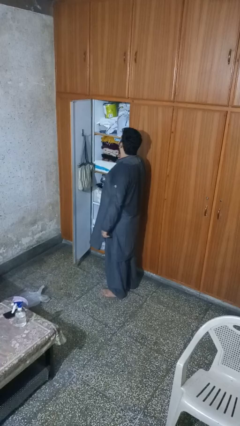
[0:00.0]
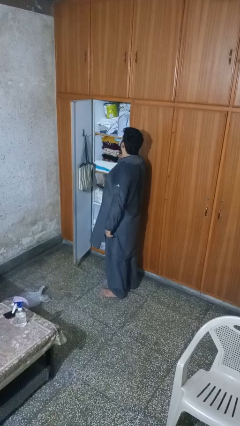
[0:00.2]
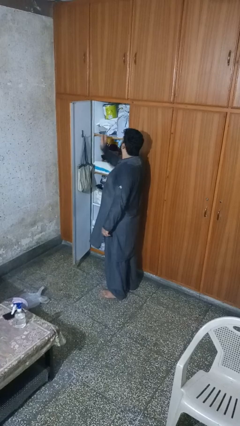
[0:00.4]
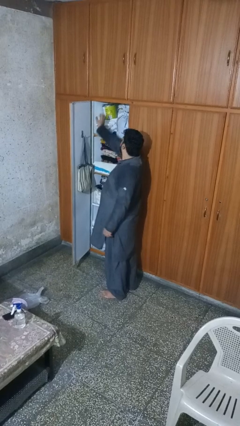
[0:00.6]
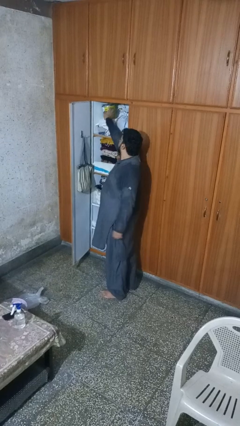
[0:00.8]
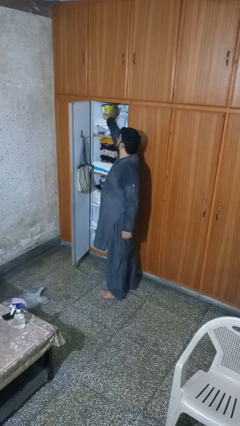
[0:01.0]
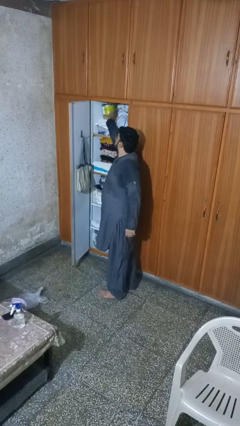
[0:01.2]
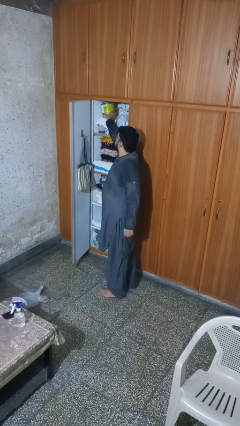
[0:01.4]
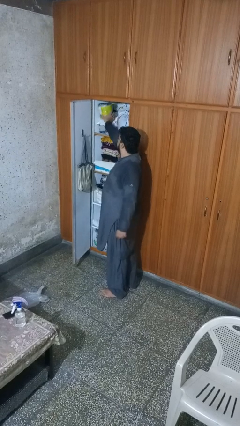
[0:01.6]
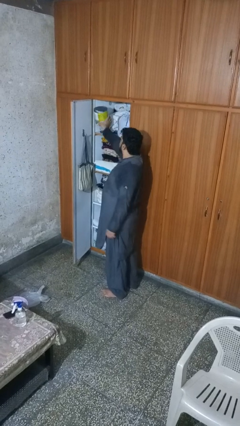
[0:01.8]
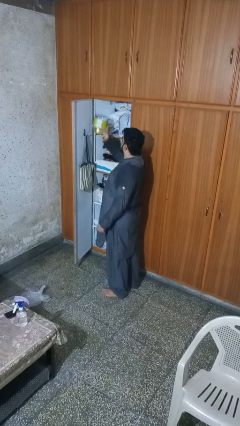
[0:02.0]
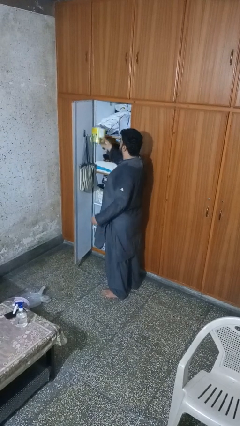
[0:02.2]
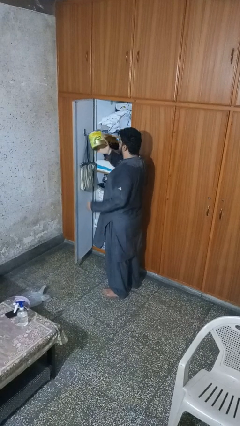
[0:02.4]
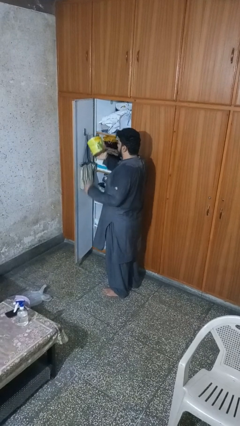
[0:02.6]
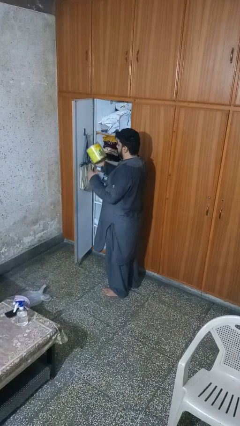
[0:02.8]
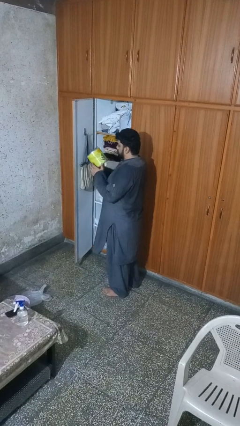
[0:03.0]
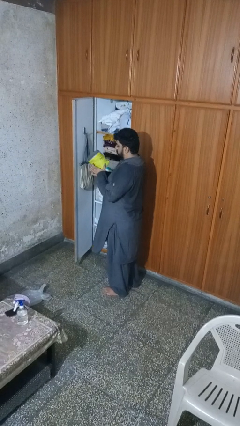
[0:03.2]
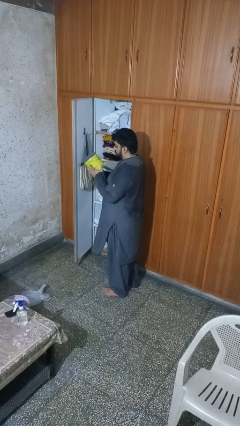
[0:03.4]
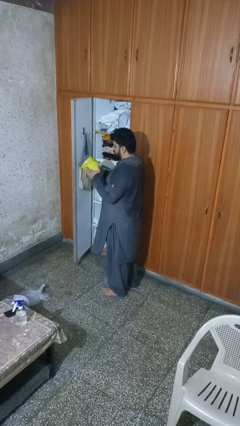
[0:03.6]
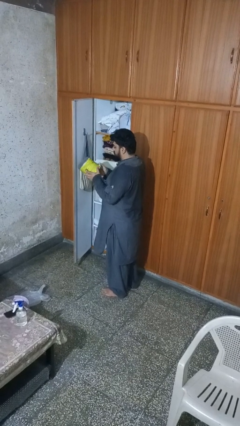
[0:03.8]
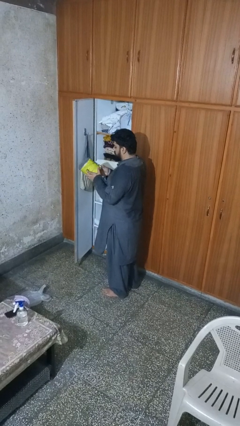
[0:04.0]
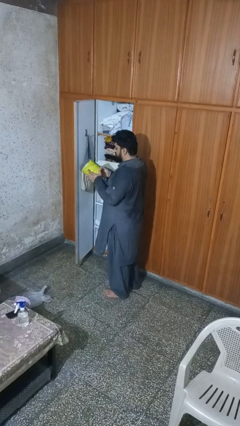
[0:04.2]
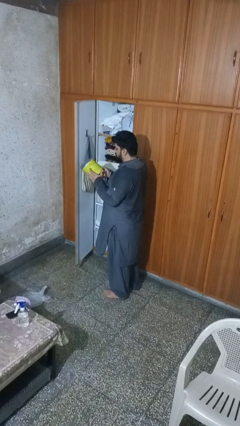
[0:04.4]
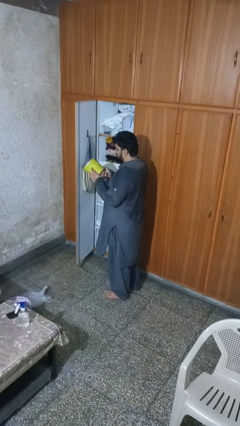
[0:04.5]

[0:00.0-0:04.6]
person picks up object from shelf

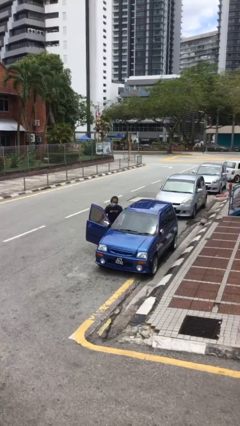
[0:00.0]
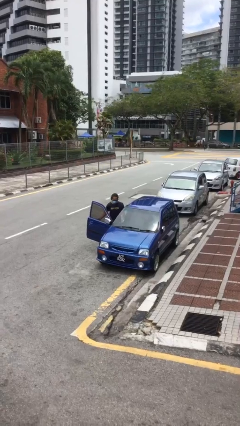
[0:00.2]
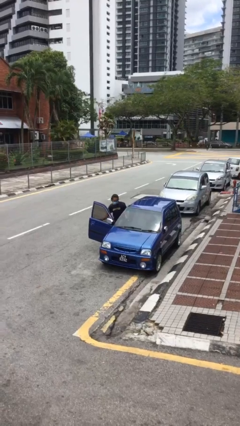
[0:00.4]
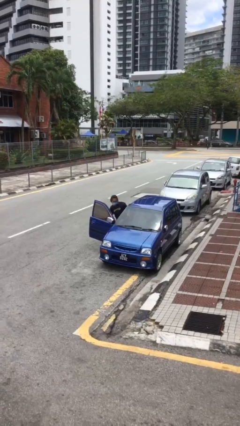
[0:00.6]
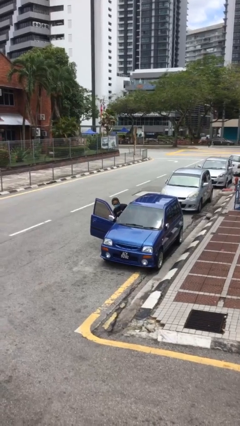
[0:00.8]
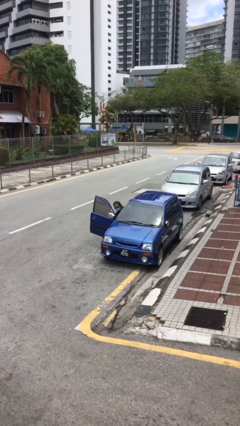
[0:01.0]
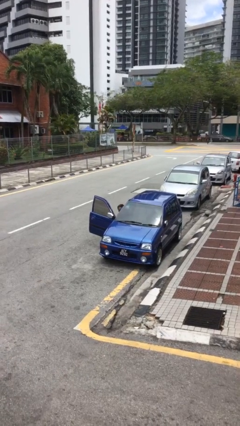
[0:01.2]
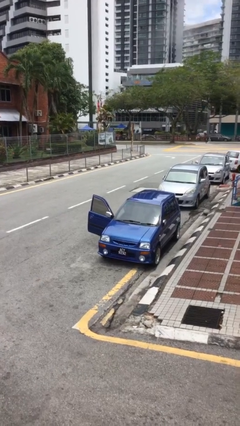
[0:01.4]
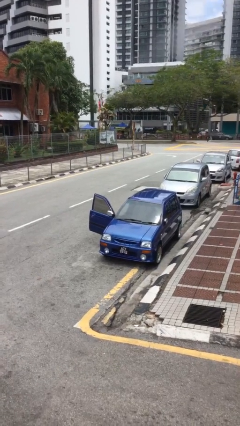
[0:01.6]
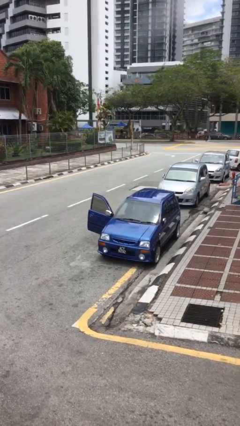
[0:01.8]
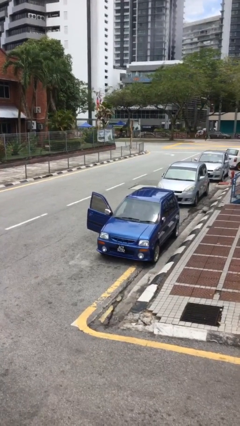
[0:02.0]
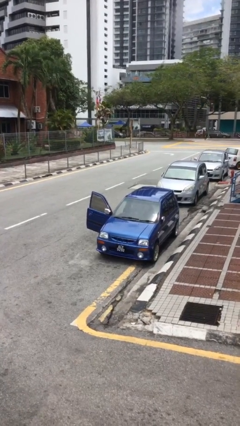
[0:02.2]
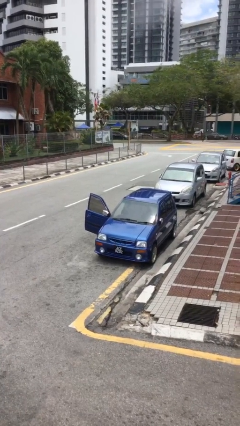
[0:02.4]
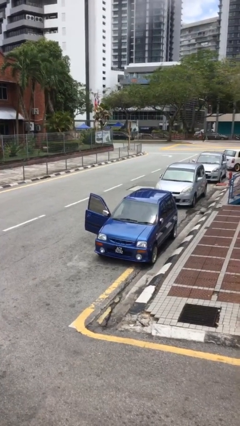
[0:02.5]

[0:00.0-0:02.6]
person enters car

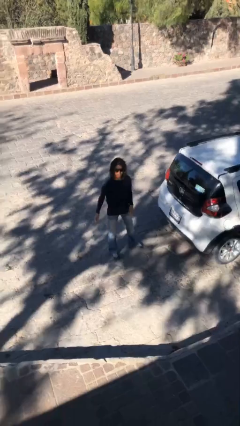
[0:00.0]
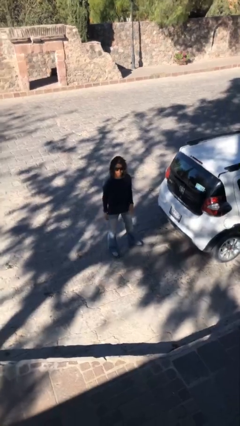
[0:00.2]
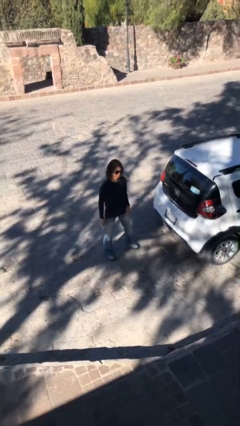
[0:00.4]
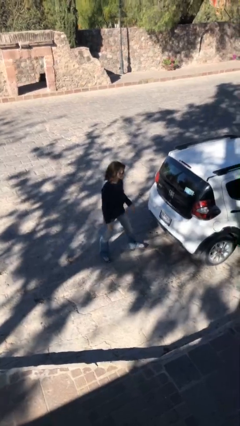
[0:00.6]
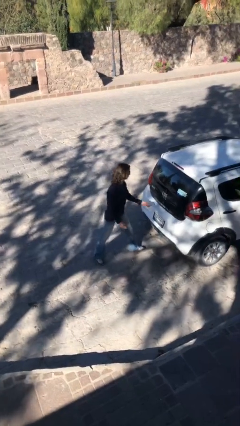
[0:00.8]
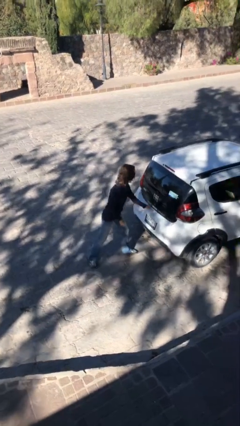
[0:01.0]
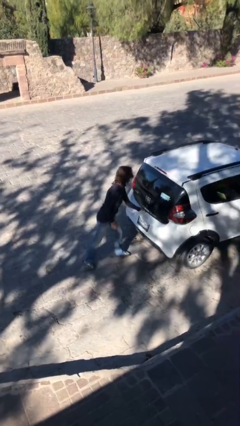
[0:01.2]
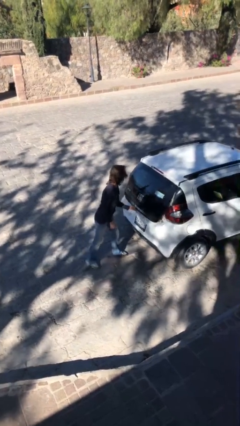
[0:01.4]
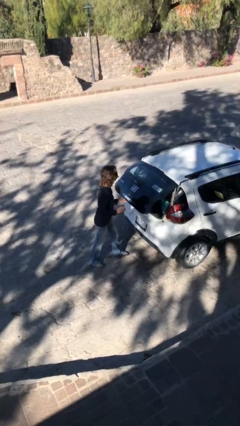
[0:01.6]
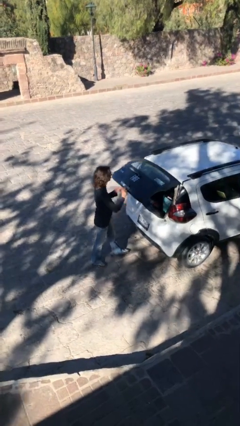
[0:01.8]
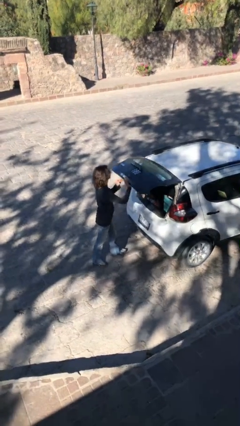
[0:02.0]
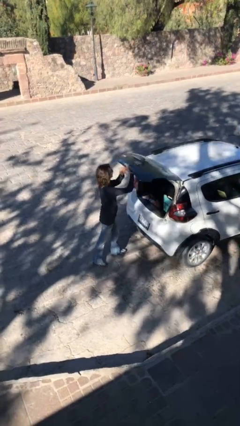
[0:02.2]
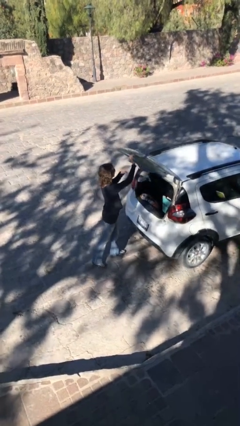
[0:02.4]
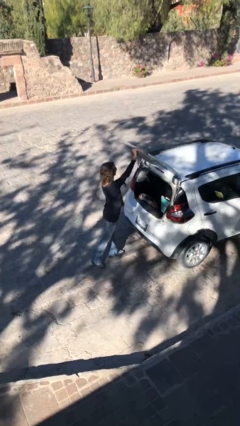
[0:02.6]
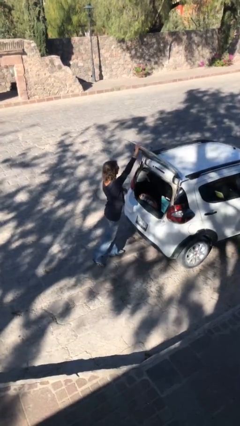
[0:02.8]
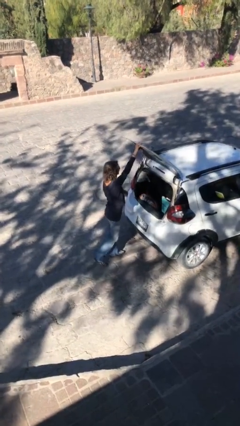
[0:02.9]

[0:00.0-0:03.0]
person opens car trunk

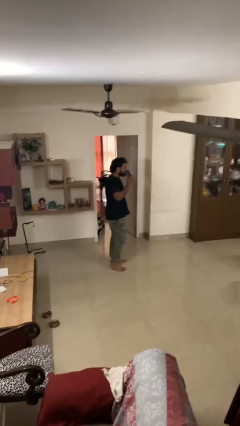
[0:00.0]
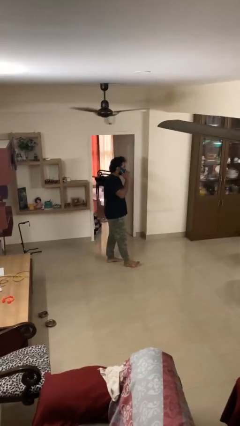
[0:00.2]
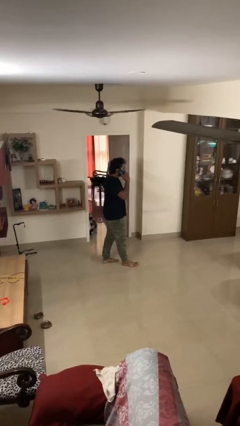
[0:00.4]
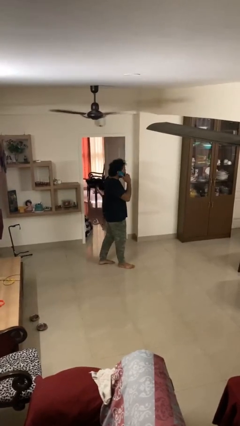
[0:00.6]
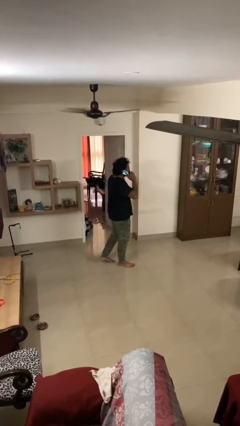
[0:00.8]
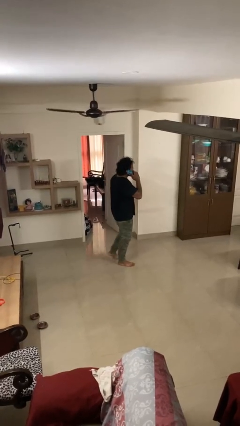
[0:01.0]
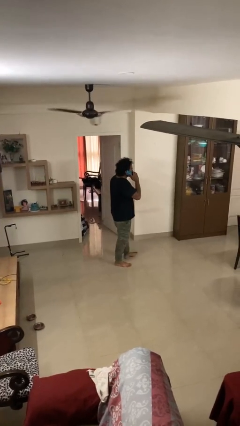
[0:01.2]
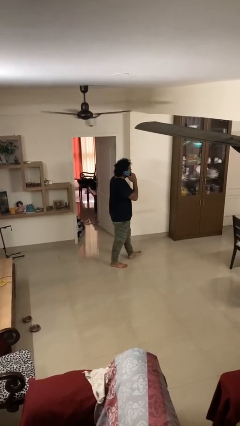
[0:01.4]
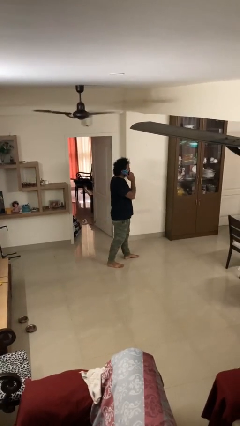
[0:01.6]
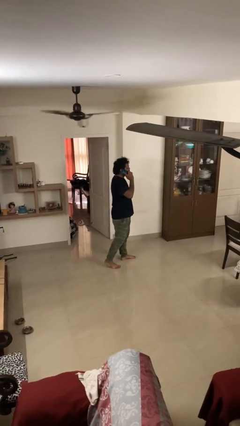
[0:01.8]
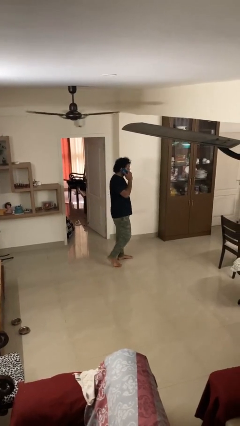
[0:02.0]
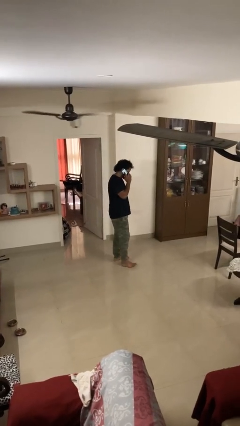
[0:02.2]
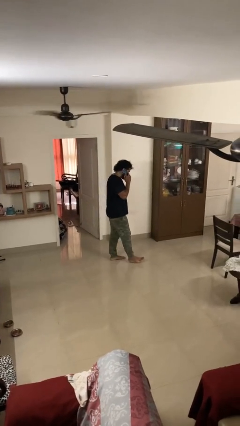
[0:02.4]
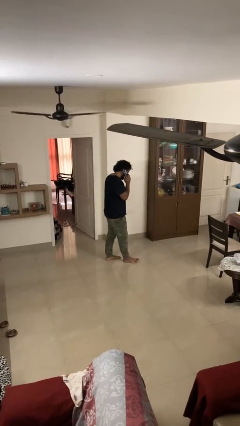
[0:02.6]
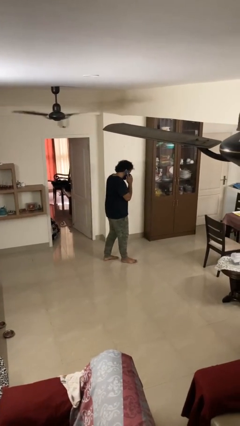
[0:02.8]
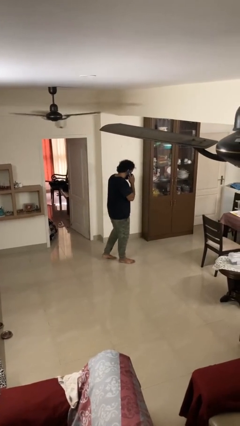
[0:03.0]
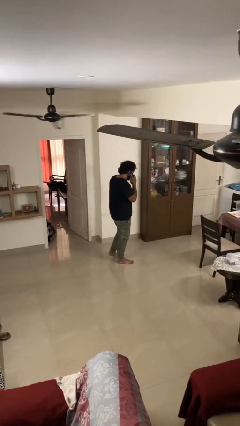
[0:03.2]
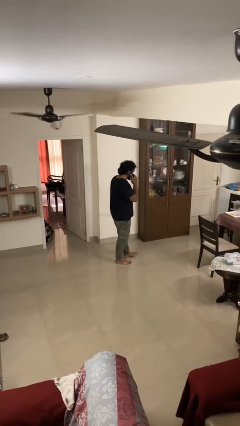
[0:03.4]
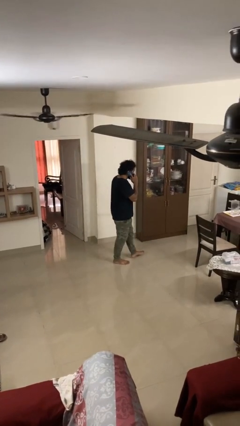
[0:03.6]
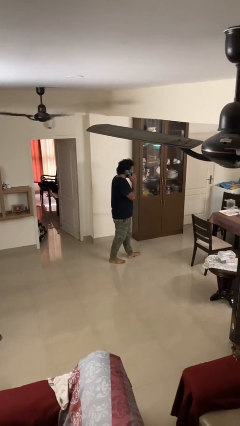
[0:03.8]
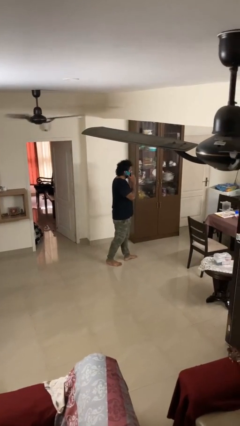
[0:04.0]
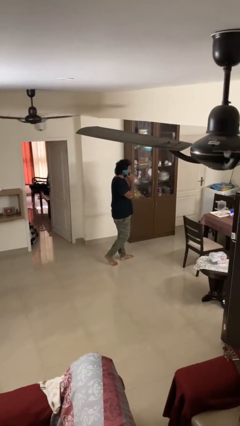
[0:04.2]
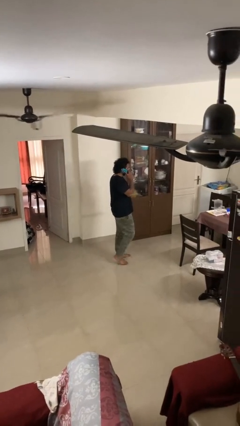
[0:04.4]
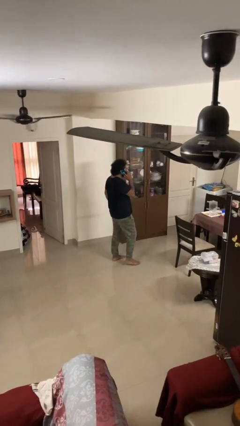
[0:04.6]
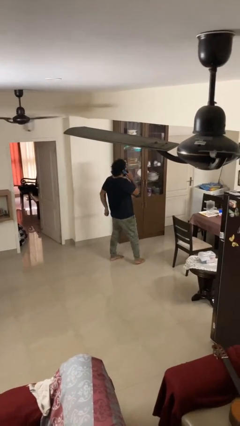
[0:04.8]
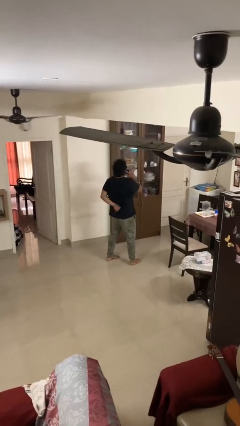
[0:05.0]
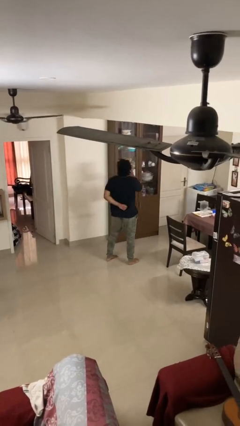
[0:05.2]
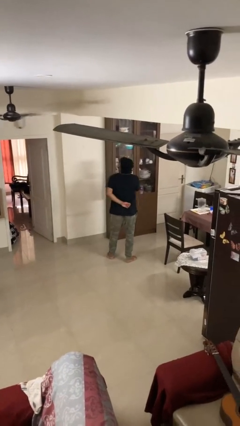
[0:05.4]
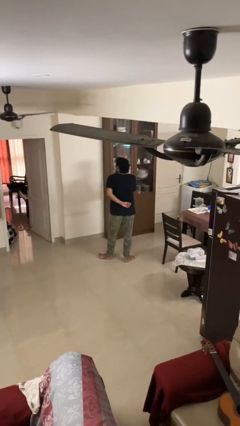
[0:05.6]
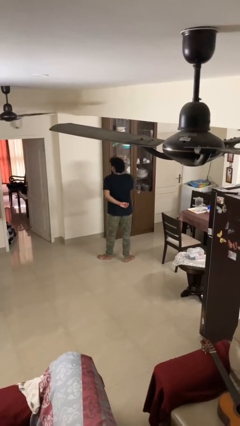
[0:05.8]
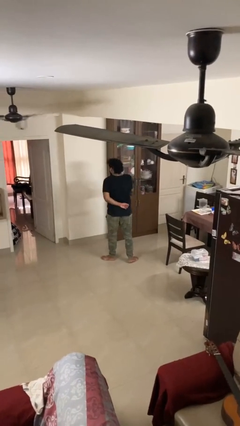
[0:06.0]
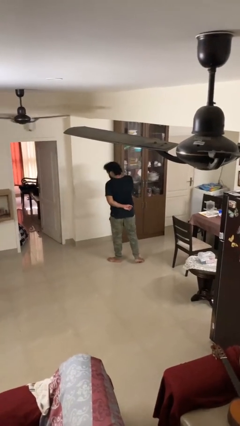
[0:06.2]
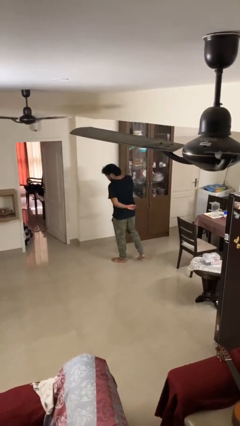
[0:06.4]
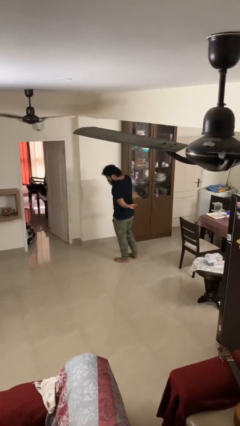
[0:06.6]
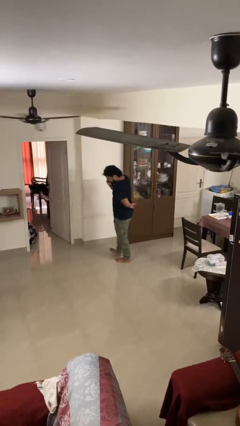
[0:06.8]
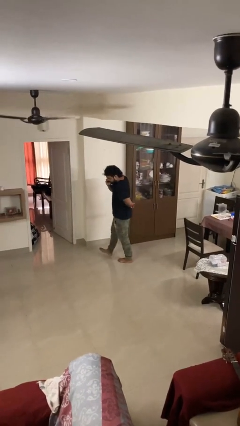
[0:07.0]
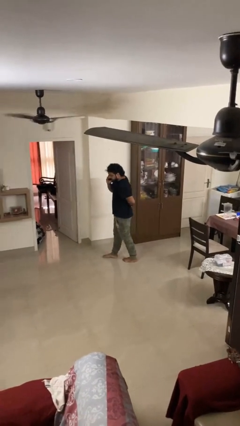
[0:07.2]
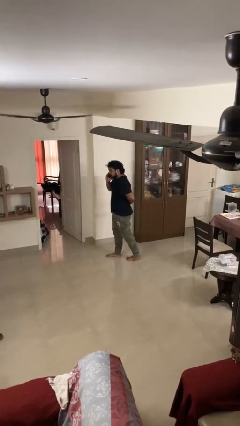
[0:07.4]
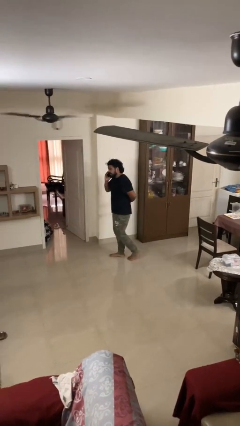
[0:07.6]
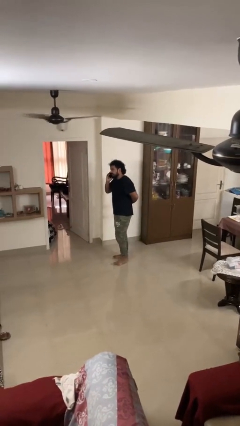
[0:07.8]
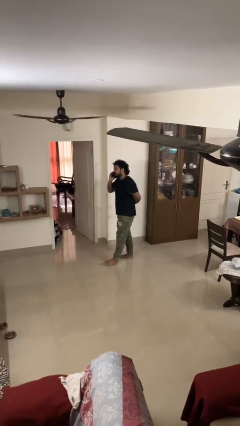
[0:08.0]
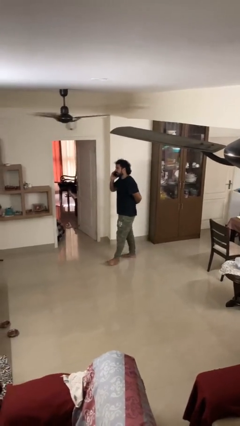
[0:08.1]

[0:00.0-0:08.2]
person talks on phone
